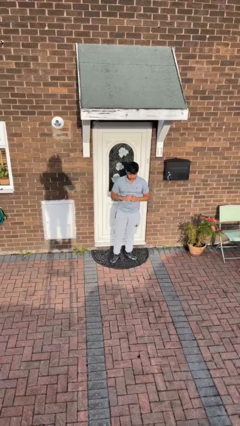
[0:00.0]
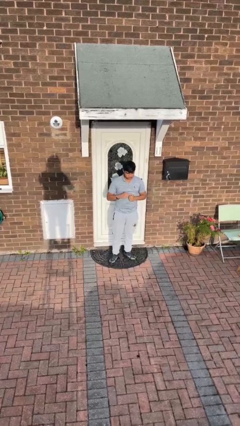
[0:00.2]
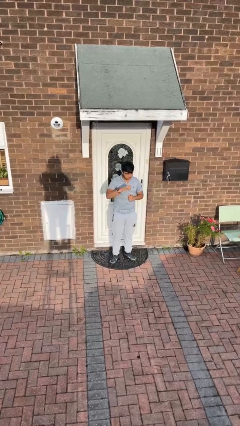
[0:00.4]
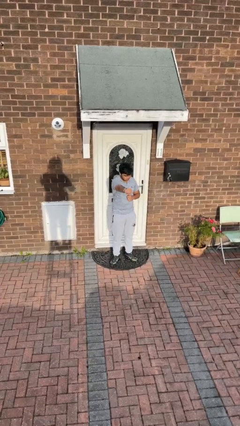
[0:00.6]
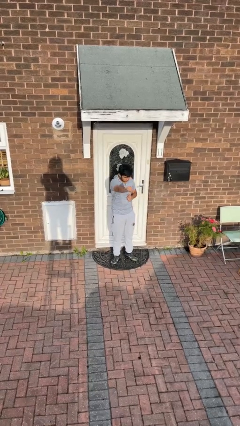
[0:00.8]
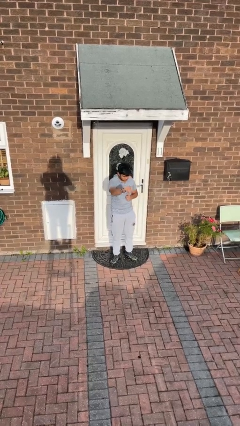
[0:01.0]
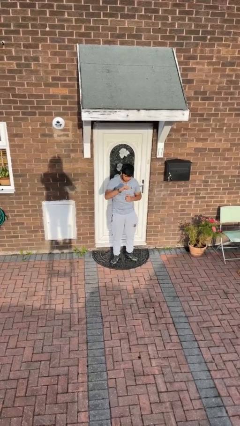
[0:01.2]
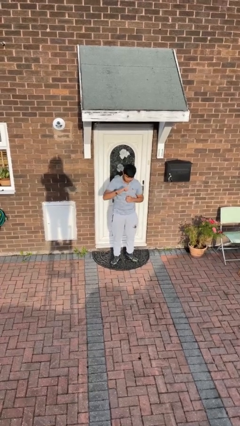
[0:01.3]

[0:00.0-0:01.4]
person punches

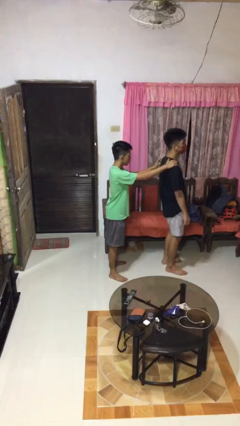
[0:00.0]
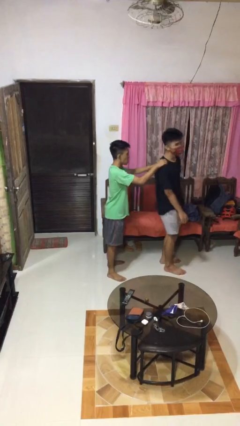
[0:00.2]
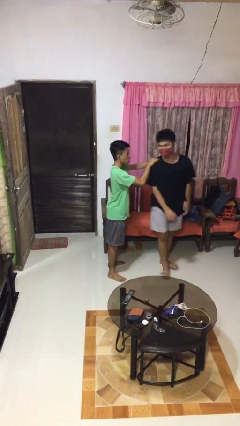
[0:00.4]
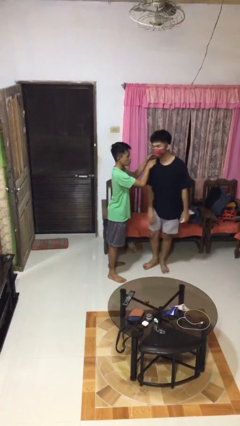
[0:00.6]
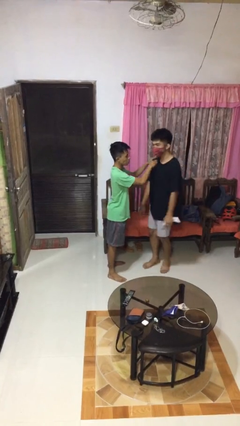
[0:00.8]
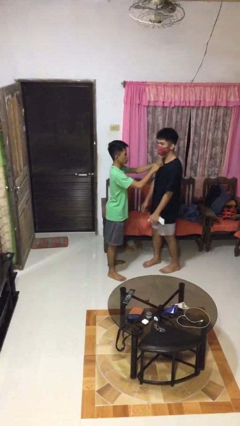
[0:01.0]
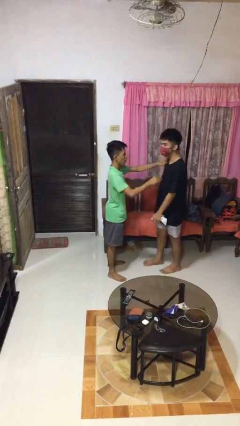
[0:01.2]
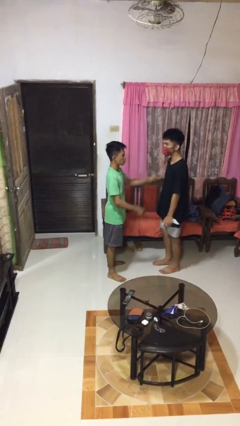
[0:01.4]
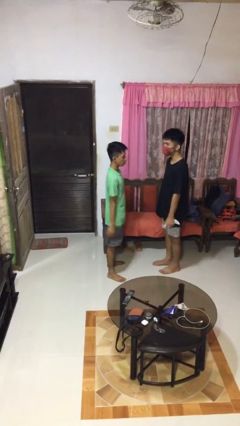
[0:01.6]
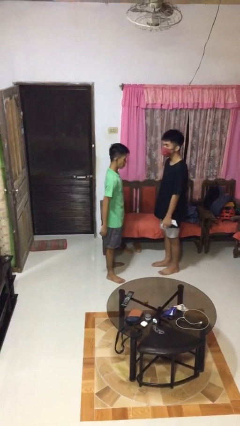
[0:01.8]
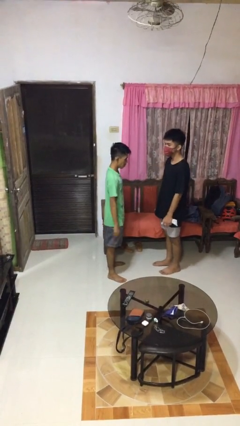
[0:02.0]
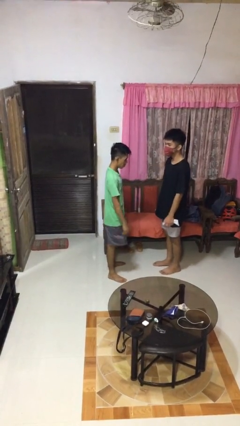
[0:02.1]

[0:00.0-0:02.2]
person spins person around

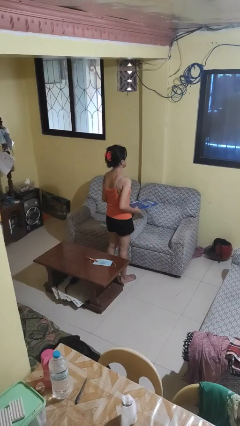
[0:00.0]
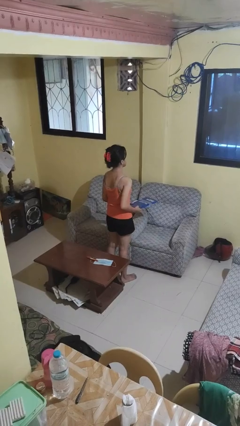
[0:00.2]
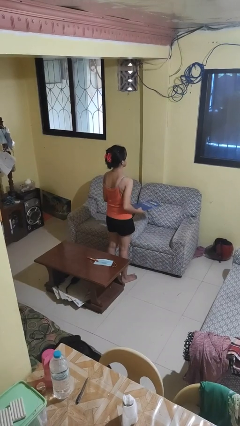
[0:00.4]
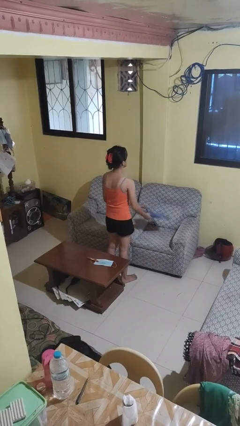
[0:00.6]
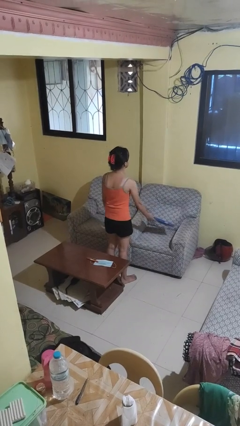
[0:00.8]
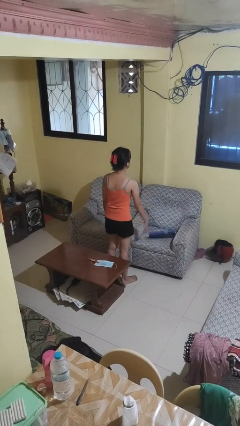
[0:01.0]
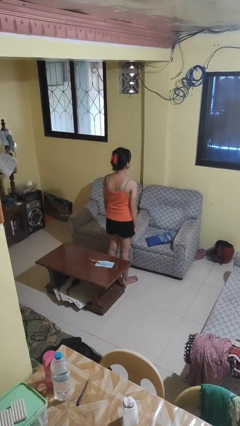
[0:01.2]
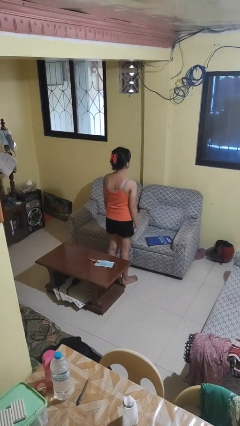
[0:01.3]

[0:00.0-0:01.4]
person puts down object on couch

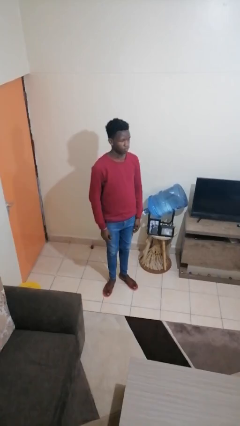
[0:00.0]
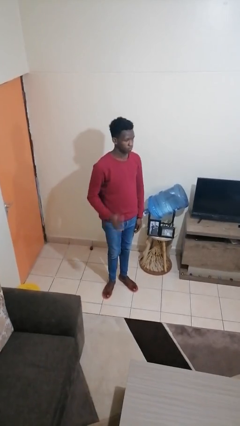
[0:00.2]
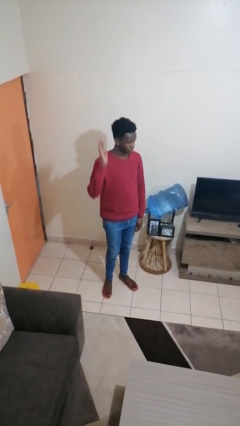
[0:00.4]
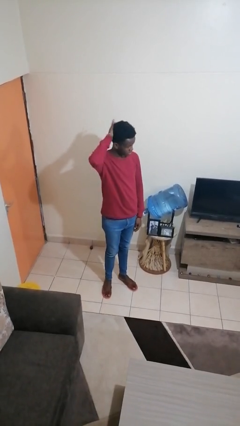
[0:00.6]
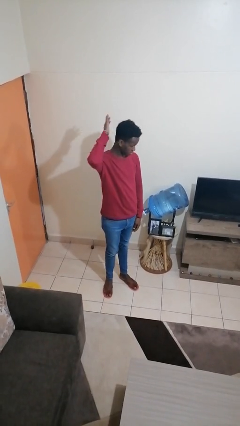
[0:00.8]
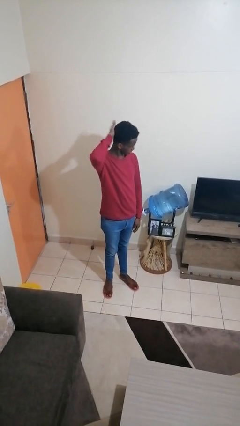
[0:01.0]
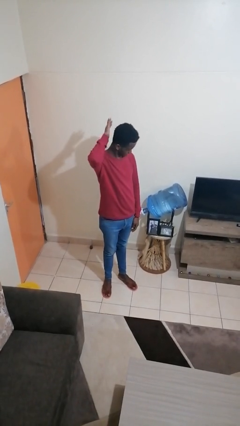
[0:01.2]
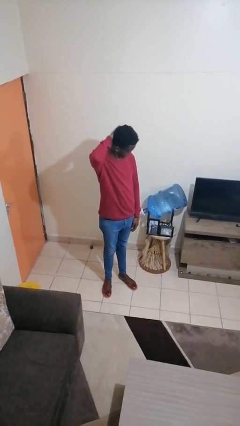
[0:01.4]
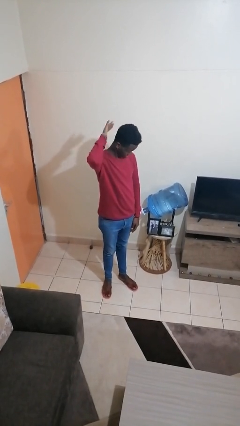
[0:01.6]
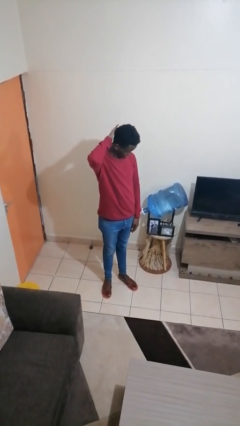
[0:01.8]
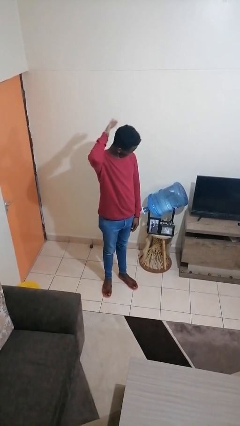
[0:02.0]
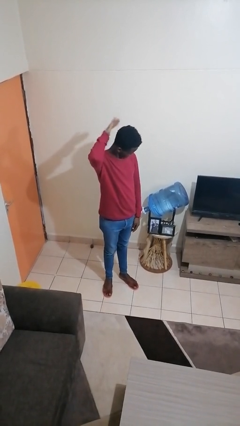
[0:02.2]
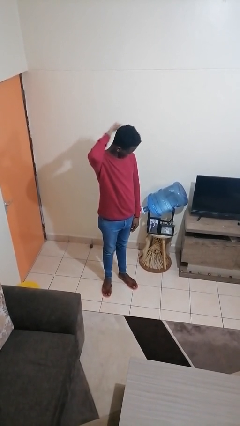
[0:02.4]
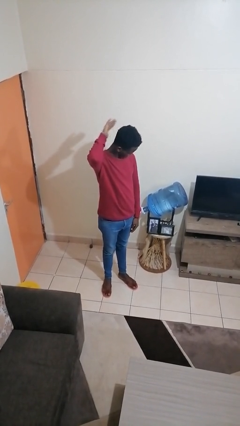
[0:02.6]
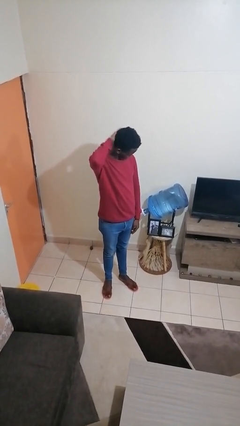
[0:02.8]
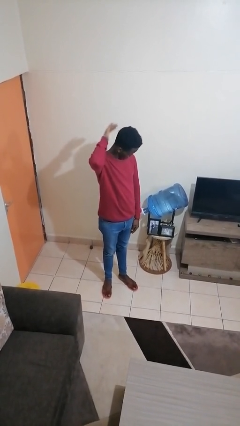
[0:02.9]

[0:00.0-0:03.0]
person pats head

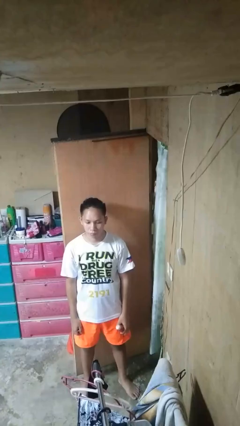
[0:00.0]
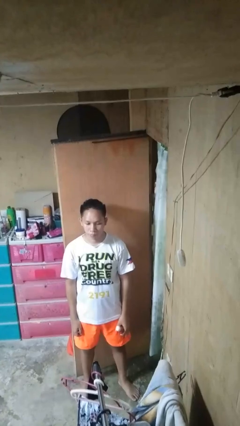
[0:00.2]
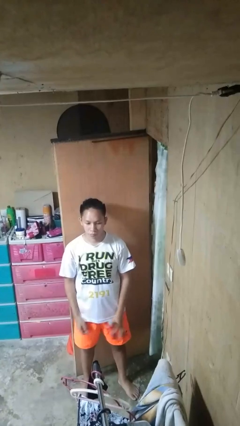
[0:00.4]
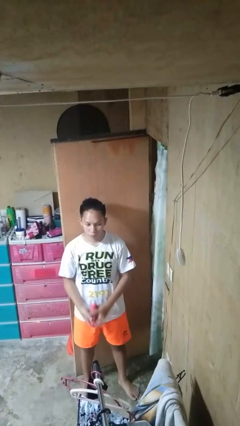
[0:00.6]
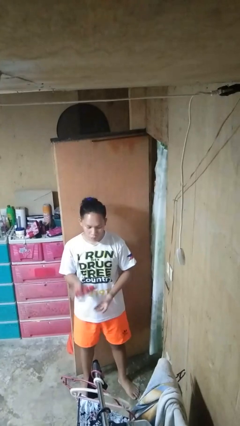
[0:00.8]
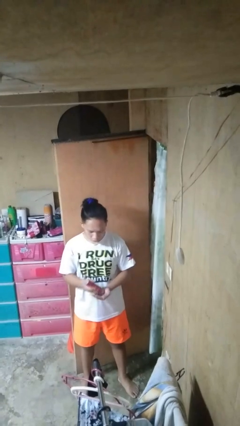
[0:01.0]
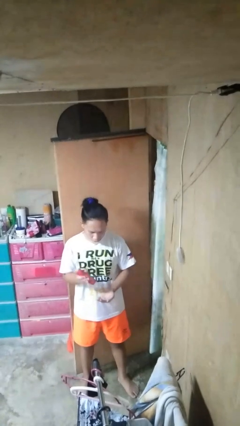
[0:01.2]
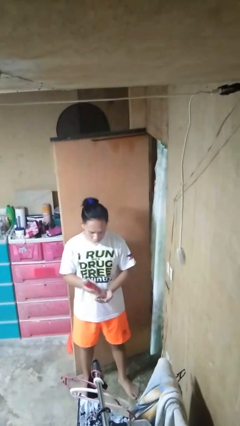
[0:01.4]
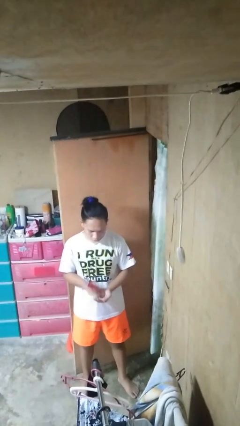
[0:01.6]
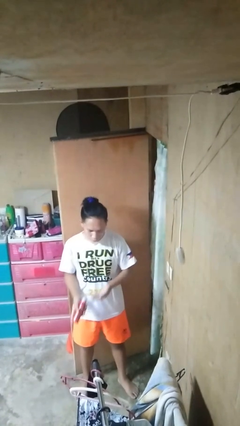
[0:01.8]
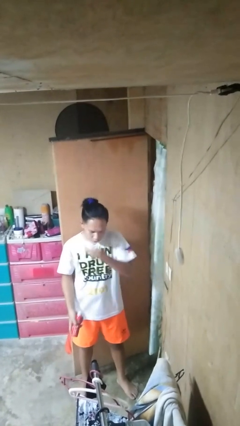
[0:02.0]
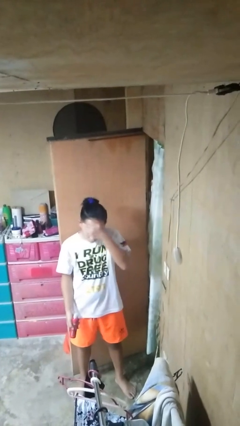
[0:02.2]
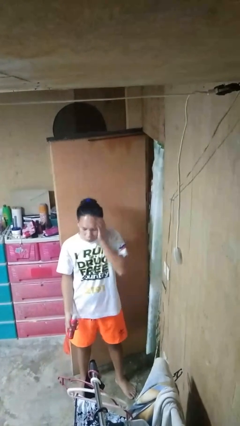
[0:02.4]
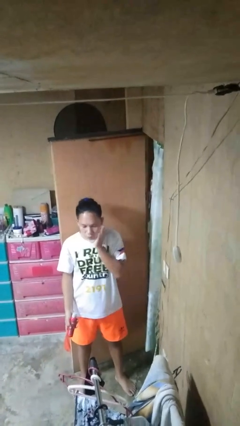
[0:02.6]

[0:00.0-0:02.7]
person applies facial moisturizer

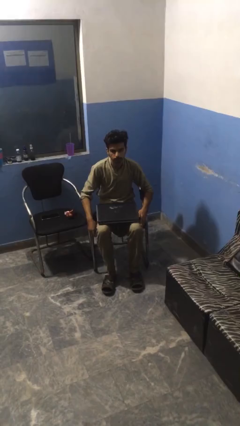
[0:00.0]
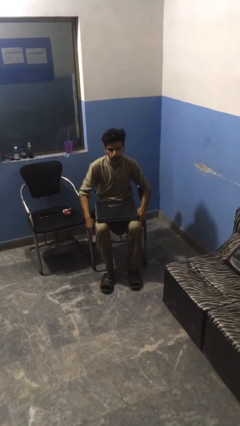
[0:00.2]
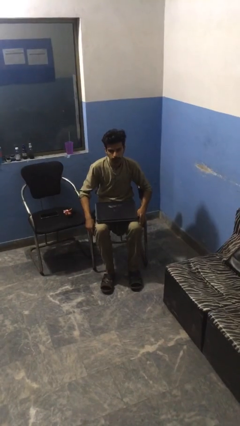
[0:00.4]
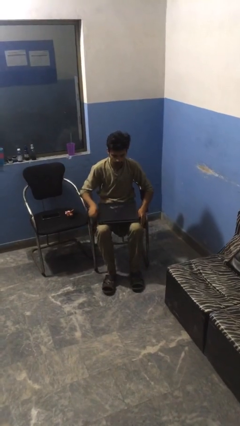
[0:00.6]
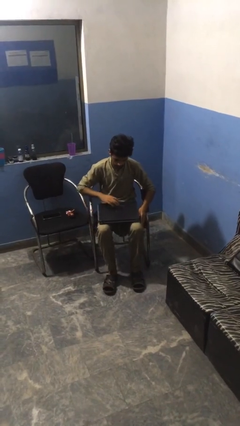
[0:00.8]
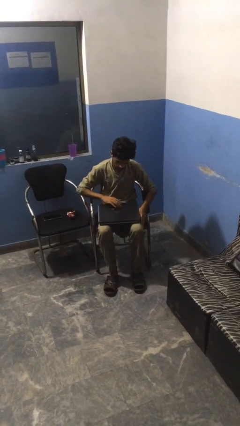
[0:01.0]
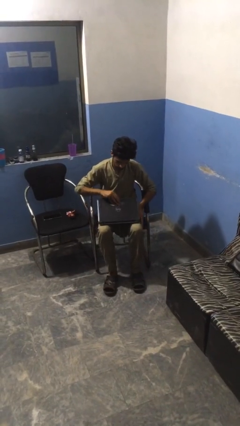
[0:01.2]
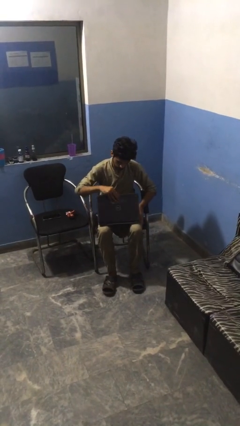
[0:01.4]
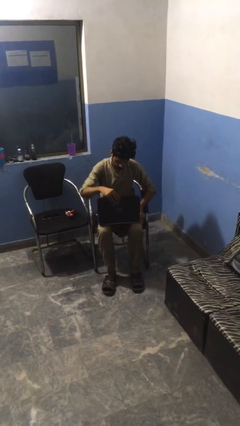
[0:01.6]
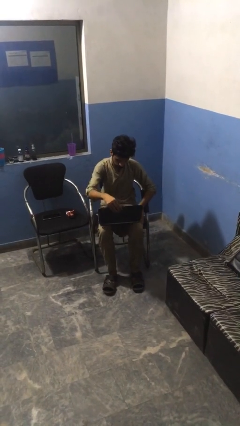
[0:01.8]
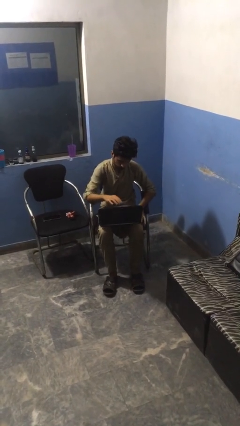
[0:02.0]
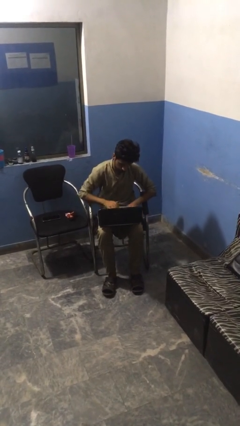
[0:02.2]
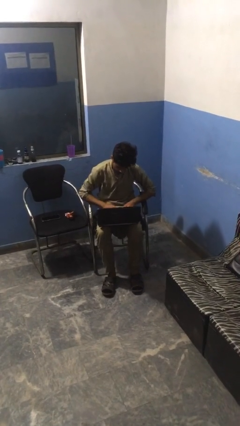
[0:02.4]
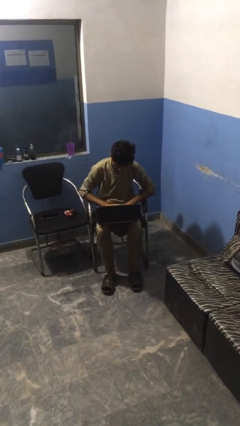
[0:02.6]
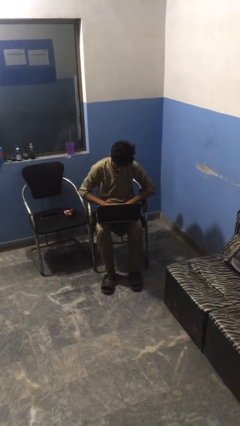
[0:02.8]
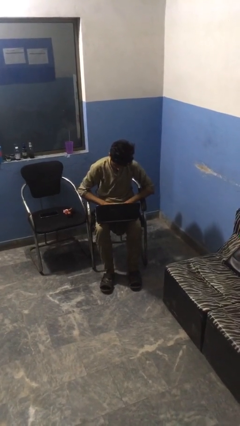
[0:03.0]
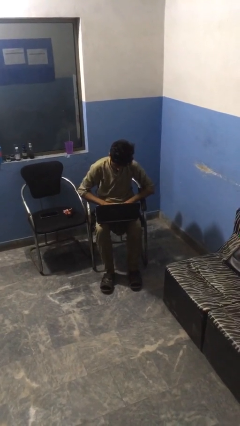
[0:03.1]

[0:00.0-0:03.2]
person opens laptop

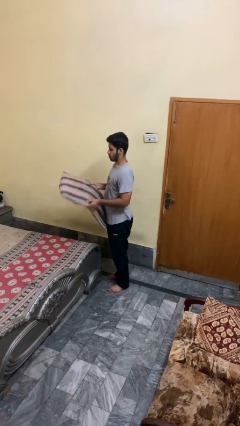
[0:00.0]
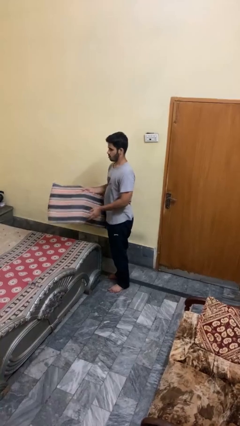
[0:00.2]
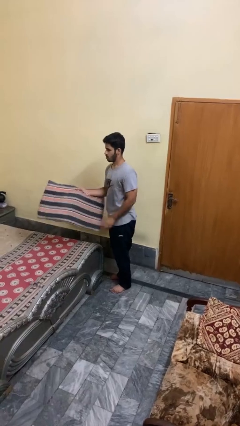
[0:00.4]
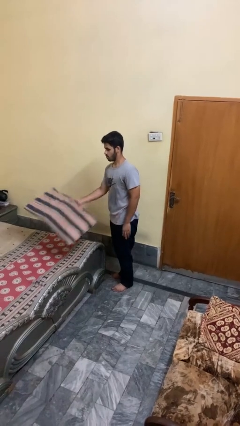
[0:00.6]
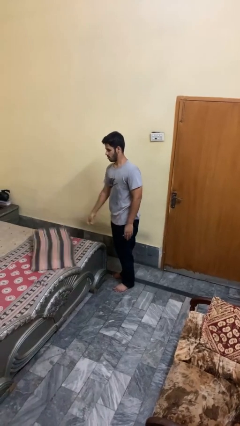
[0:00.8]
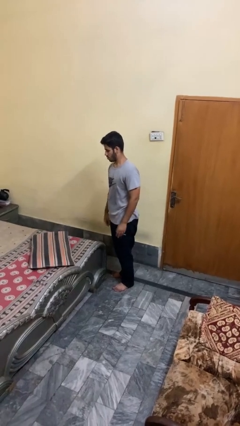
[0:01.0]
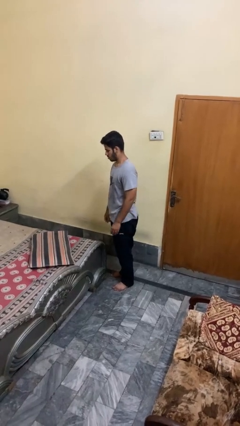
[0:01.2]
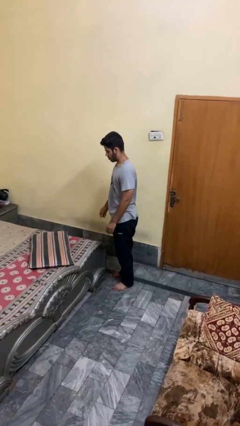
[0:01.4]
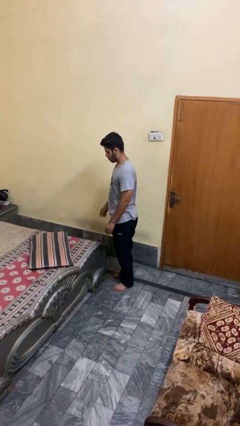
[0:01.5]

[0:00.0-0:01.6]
person puts down object on bed

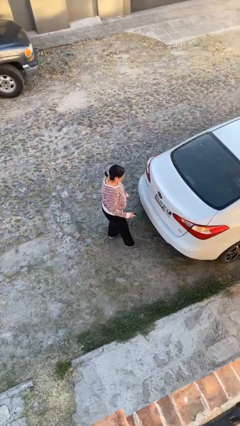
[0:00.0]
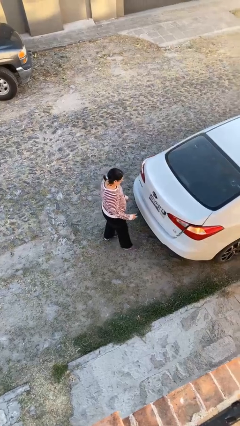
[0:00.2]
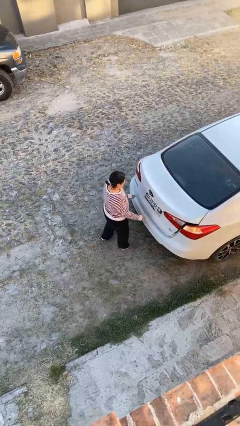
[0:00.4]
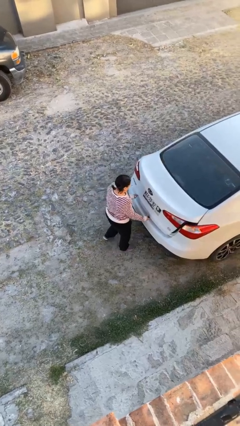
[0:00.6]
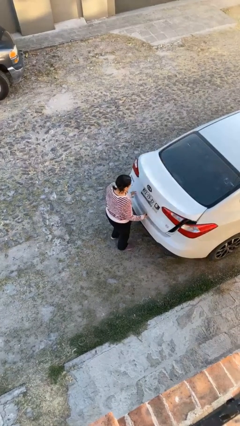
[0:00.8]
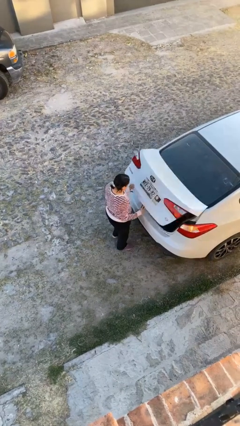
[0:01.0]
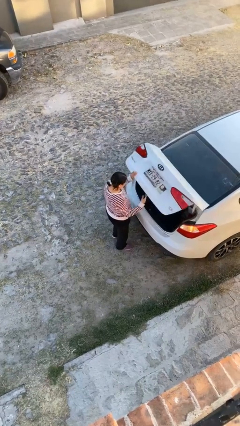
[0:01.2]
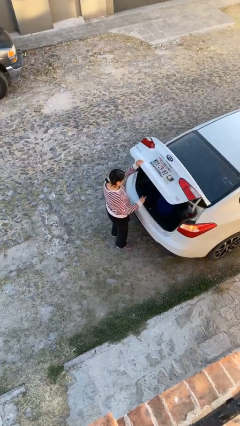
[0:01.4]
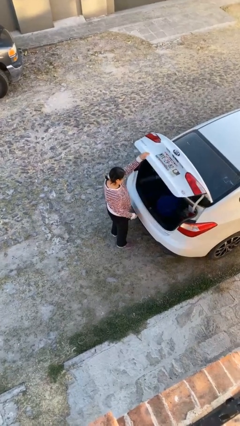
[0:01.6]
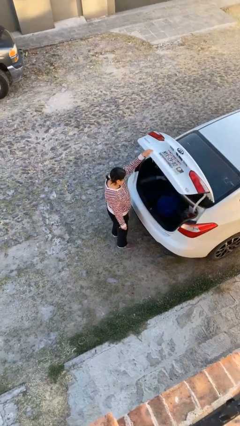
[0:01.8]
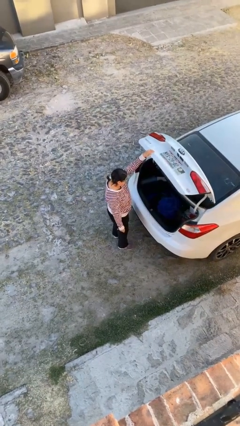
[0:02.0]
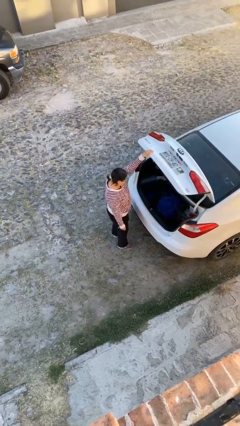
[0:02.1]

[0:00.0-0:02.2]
person opens car trunk
